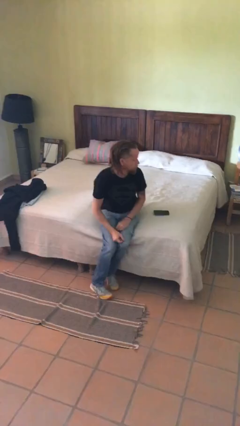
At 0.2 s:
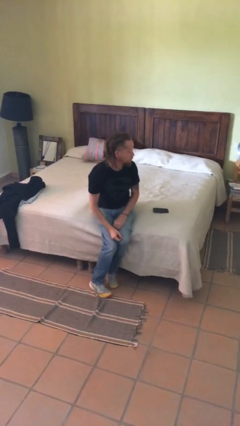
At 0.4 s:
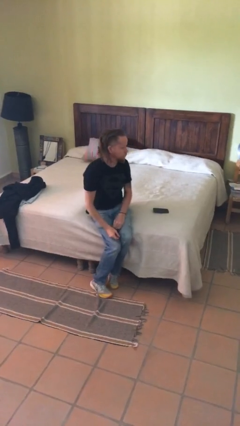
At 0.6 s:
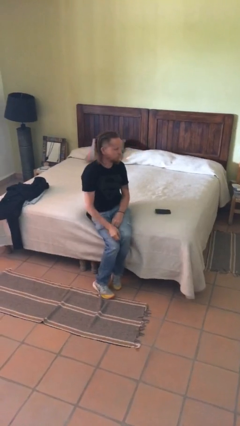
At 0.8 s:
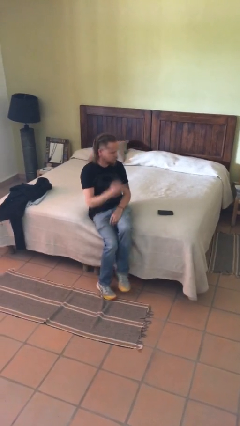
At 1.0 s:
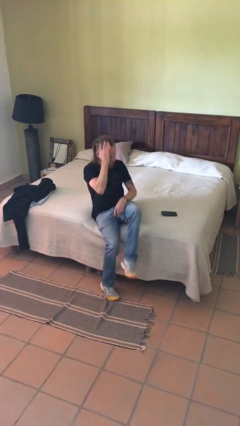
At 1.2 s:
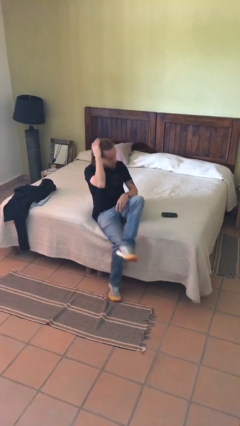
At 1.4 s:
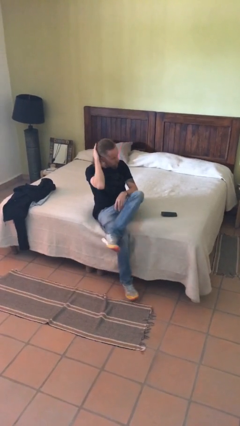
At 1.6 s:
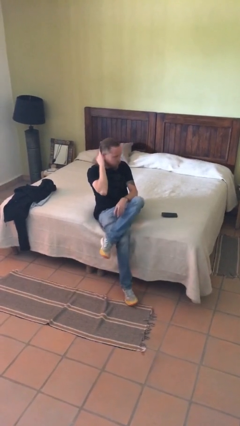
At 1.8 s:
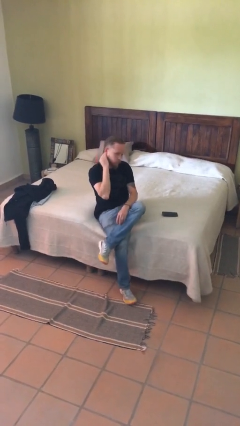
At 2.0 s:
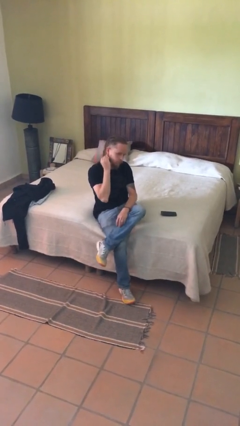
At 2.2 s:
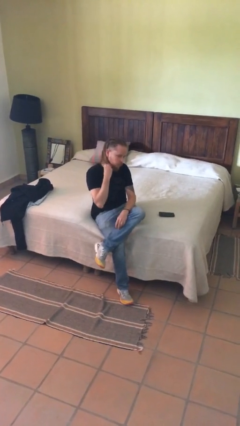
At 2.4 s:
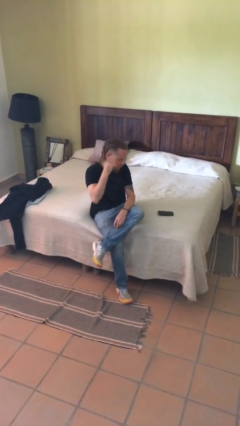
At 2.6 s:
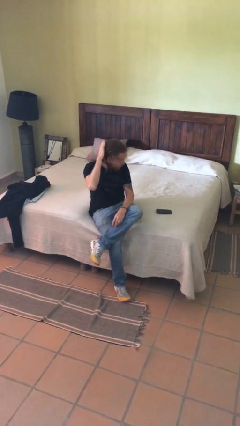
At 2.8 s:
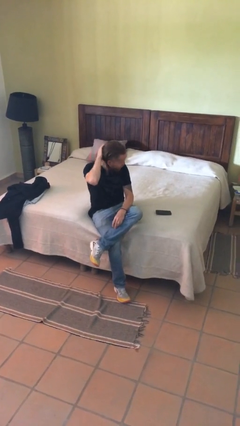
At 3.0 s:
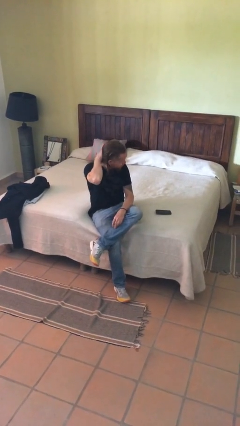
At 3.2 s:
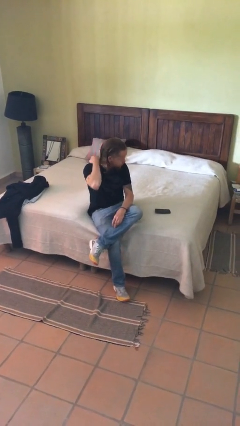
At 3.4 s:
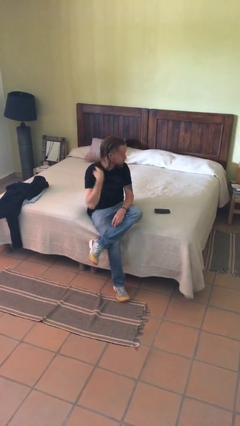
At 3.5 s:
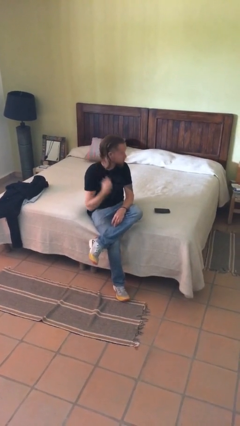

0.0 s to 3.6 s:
person strokes hair

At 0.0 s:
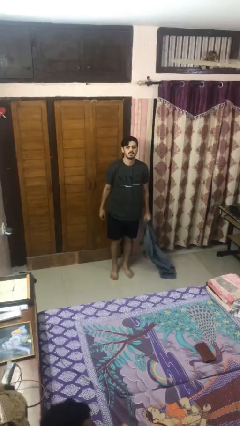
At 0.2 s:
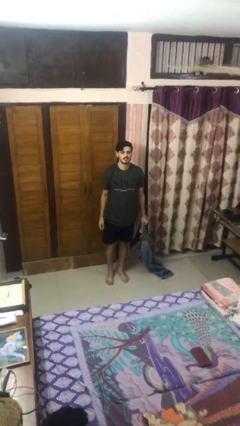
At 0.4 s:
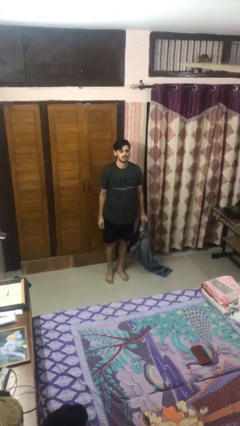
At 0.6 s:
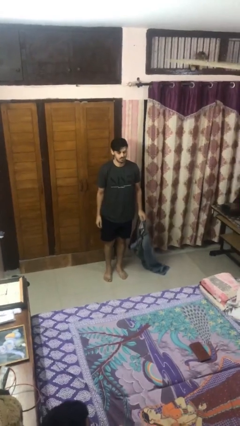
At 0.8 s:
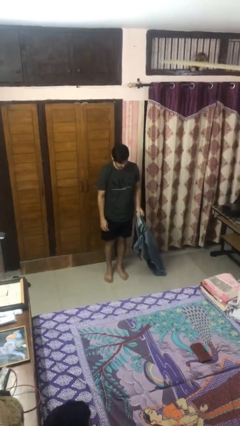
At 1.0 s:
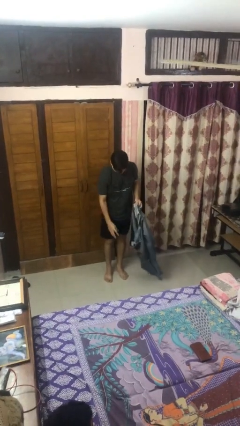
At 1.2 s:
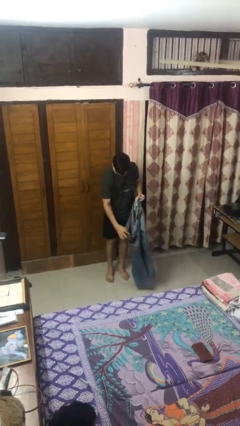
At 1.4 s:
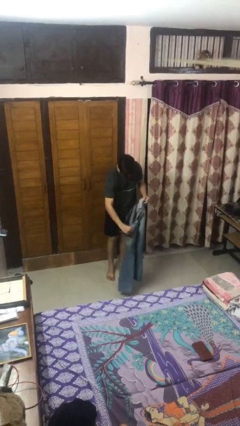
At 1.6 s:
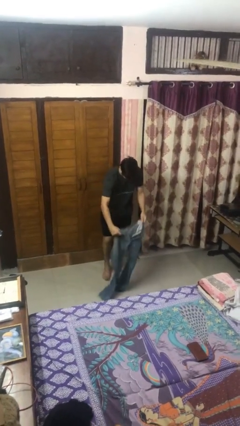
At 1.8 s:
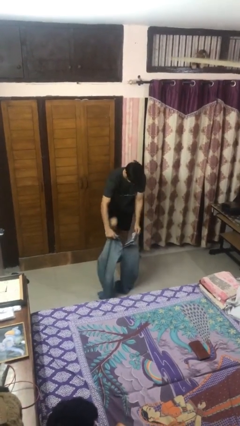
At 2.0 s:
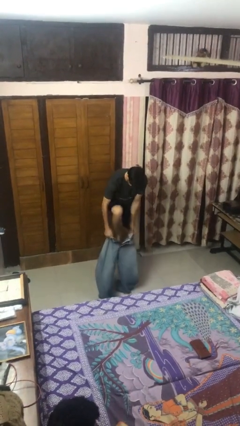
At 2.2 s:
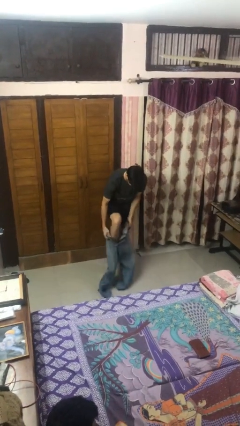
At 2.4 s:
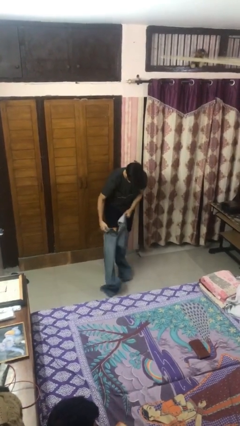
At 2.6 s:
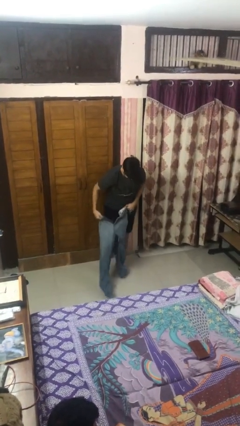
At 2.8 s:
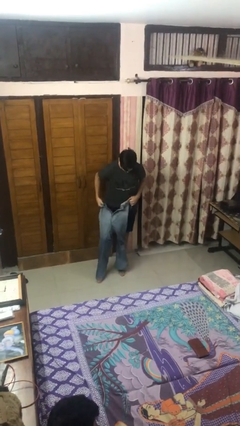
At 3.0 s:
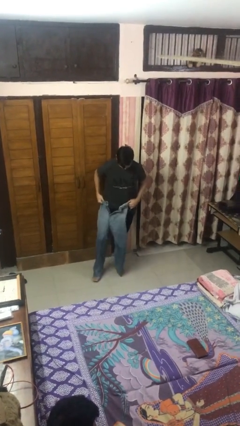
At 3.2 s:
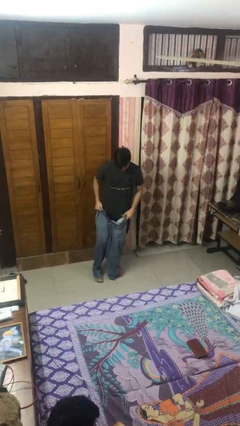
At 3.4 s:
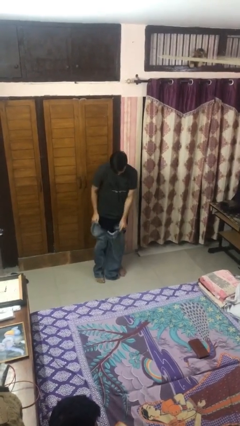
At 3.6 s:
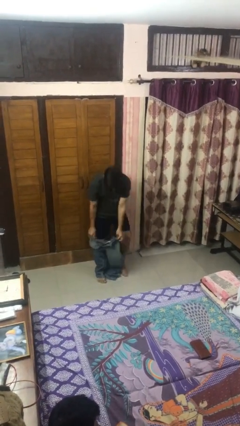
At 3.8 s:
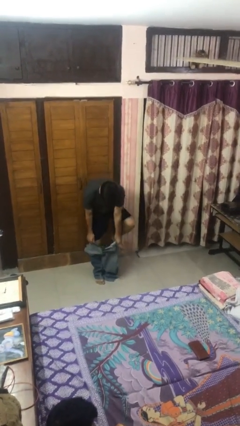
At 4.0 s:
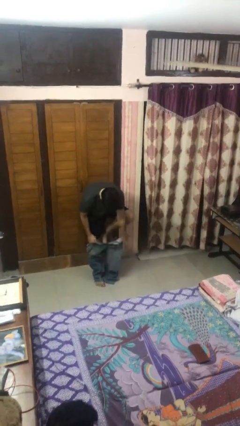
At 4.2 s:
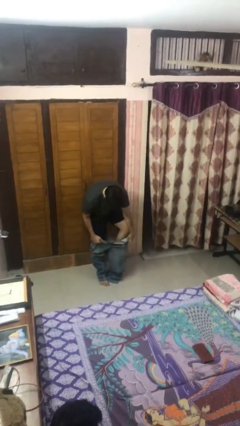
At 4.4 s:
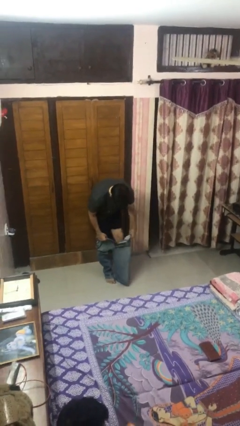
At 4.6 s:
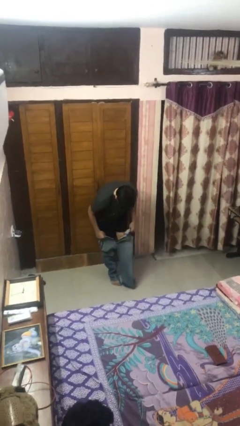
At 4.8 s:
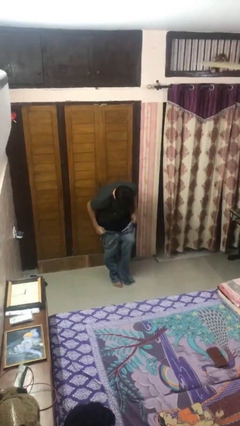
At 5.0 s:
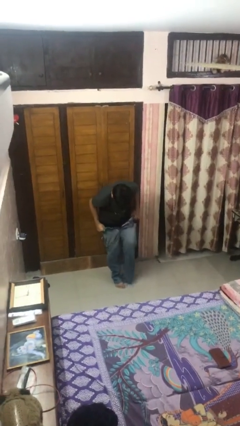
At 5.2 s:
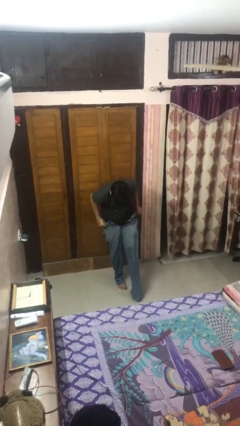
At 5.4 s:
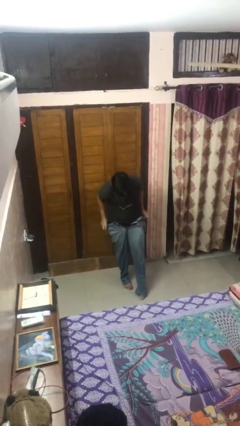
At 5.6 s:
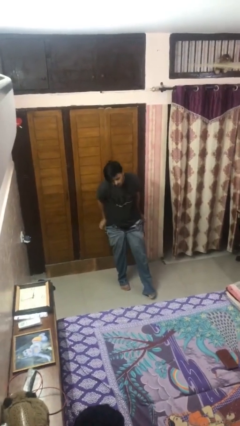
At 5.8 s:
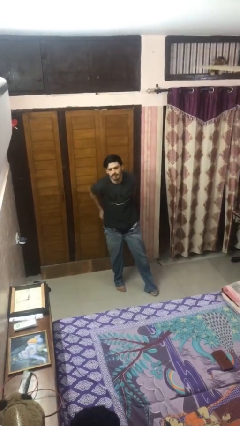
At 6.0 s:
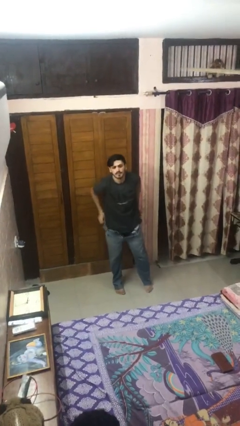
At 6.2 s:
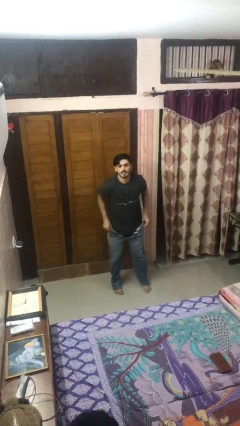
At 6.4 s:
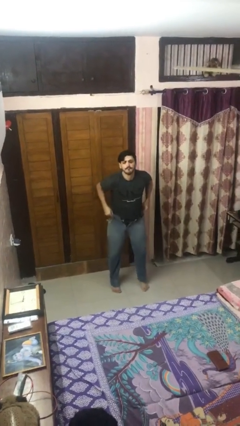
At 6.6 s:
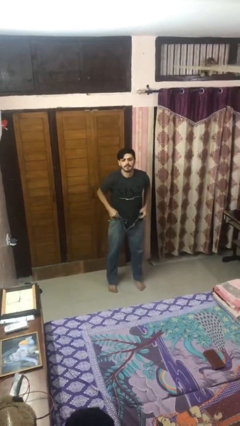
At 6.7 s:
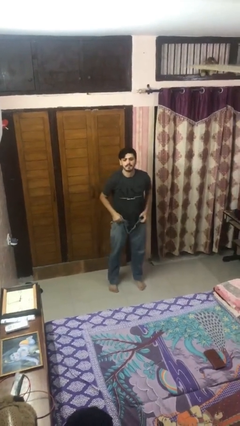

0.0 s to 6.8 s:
person puts on pants

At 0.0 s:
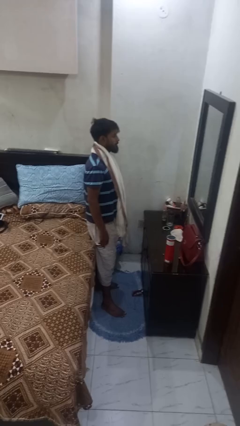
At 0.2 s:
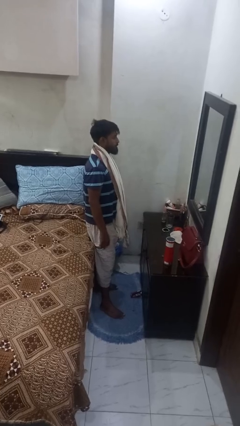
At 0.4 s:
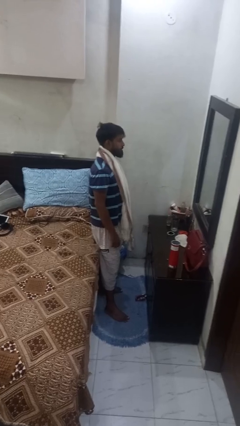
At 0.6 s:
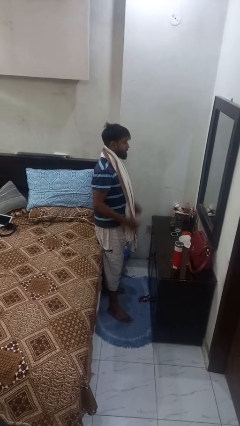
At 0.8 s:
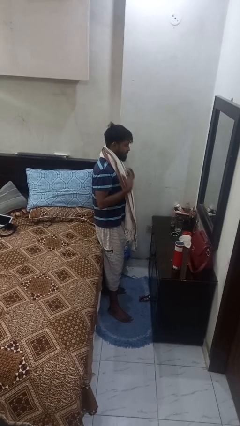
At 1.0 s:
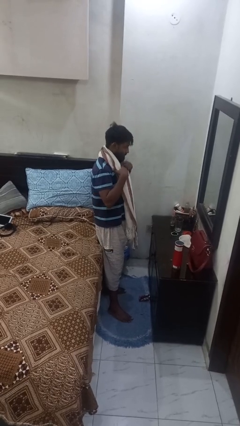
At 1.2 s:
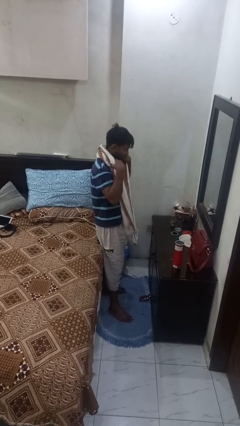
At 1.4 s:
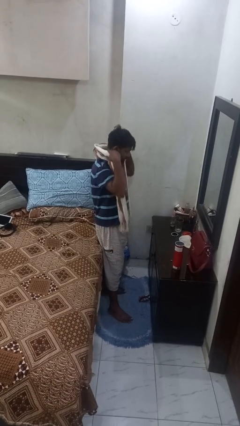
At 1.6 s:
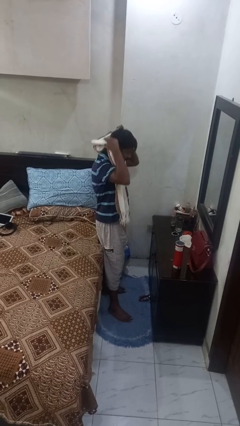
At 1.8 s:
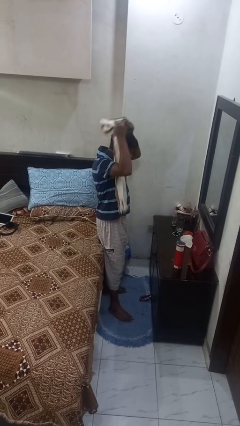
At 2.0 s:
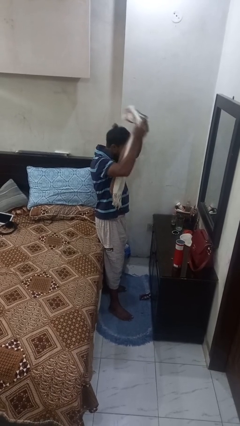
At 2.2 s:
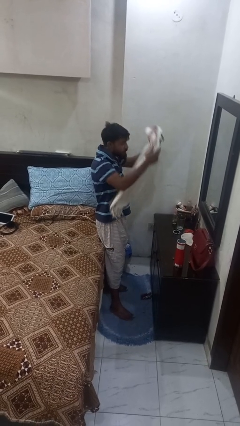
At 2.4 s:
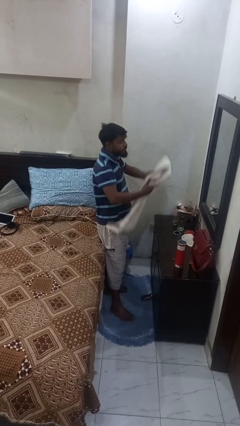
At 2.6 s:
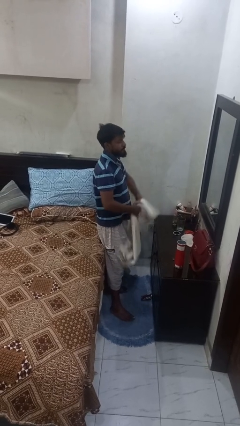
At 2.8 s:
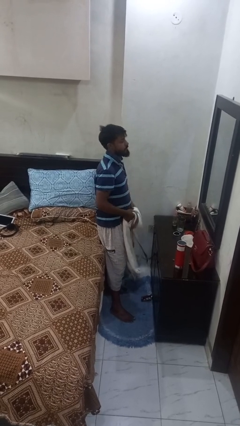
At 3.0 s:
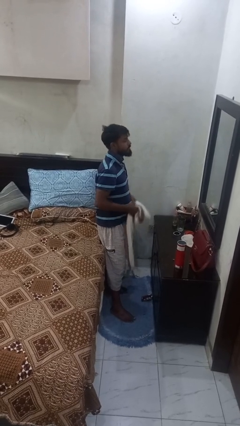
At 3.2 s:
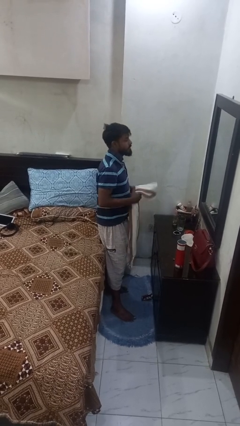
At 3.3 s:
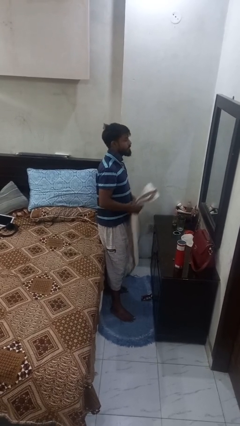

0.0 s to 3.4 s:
person takes off scarf

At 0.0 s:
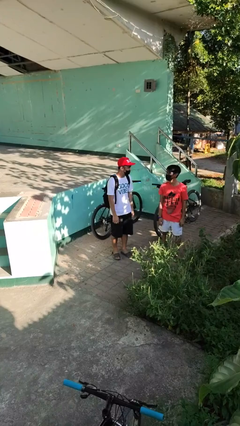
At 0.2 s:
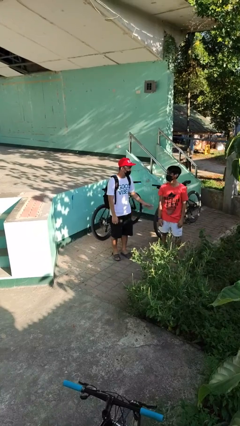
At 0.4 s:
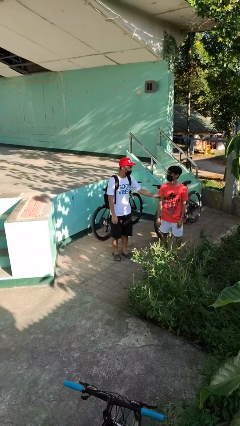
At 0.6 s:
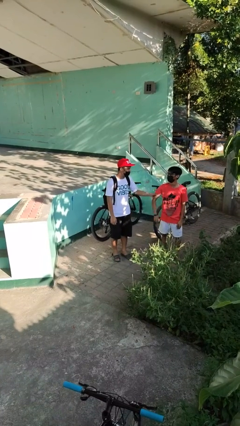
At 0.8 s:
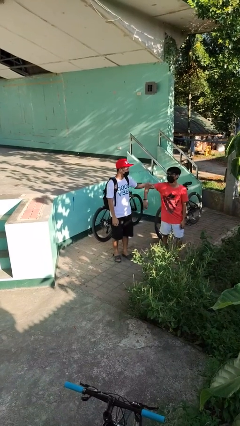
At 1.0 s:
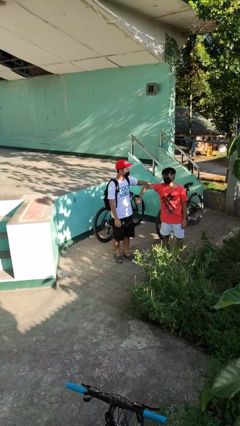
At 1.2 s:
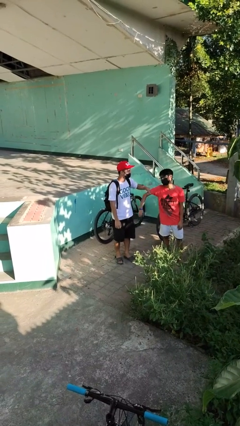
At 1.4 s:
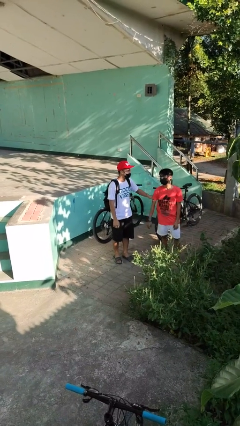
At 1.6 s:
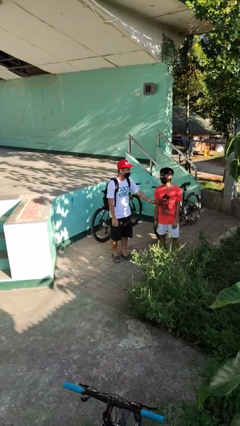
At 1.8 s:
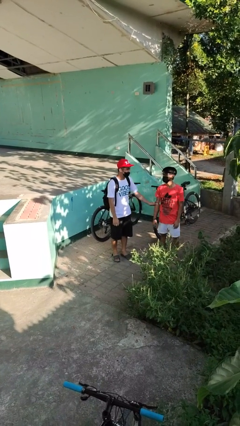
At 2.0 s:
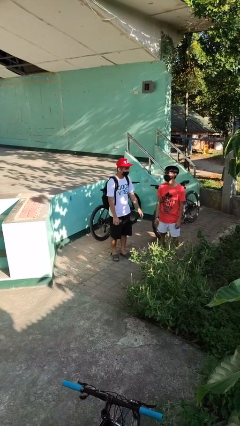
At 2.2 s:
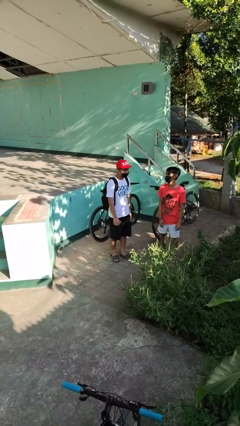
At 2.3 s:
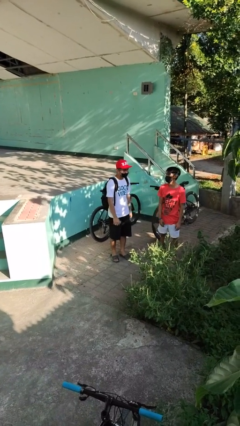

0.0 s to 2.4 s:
person grabs person by bicep

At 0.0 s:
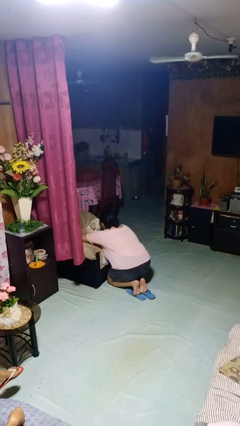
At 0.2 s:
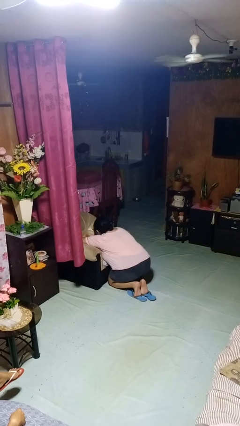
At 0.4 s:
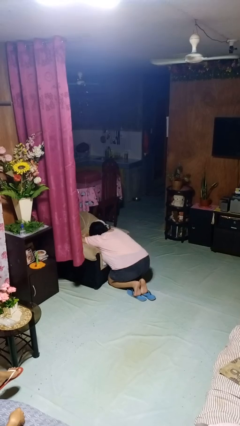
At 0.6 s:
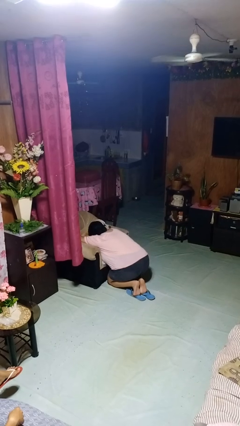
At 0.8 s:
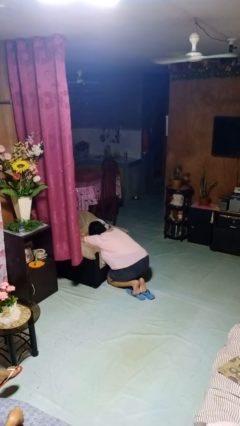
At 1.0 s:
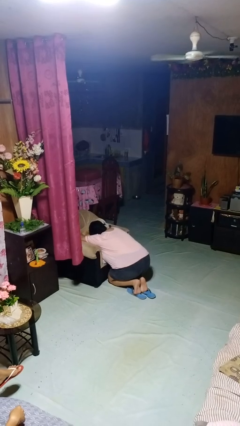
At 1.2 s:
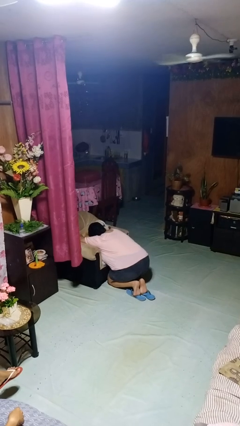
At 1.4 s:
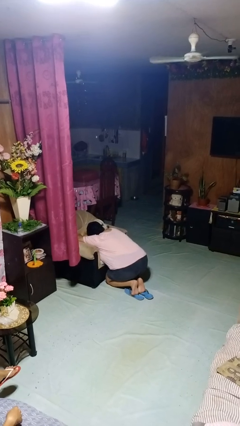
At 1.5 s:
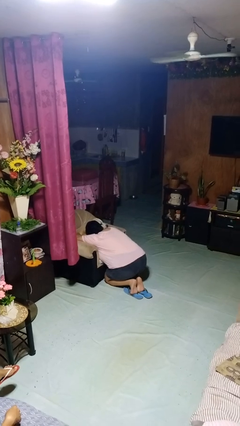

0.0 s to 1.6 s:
person hugs dog
